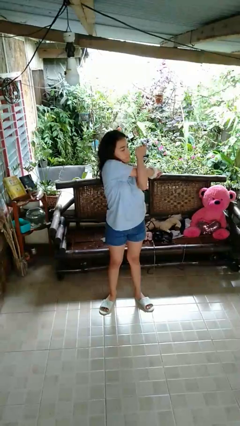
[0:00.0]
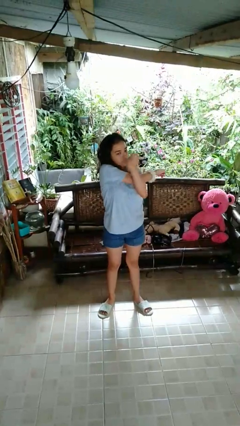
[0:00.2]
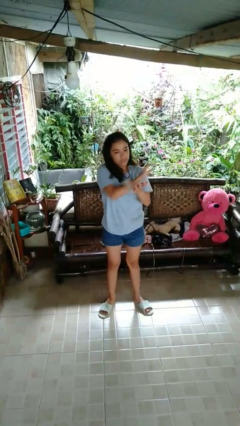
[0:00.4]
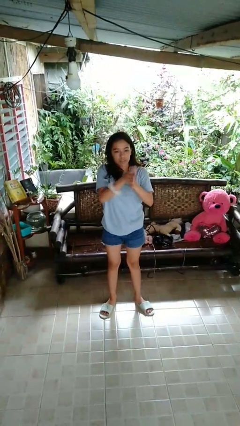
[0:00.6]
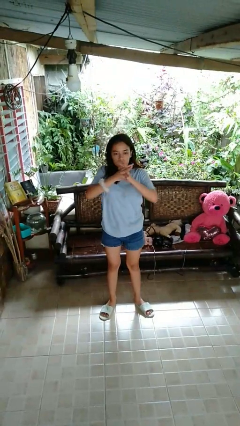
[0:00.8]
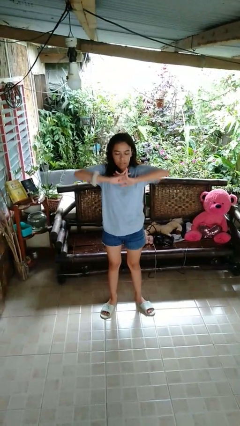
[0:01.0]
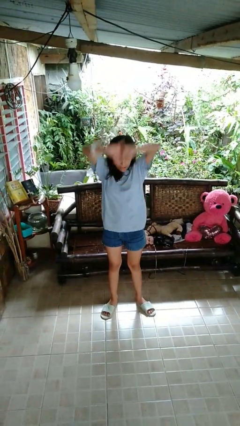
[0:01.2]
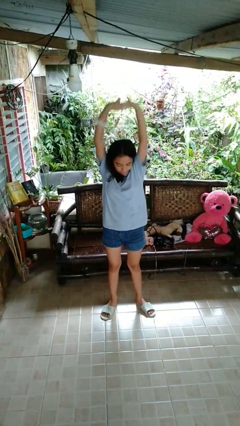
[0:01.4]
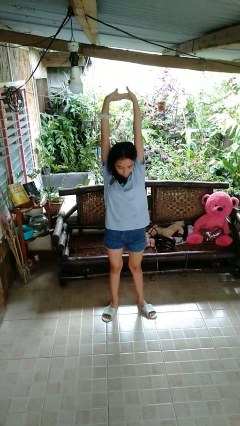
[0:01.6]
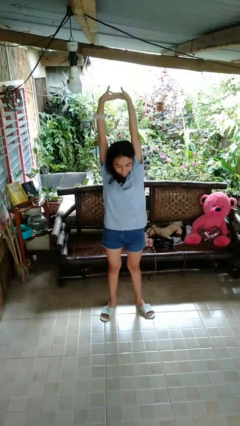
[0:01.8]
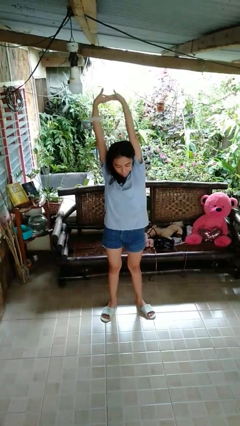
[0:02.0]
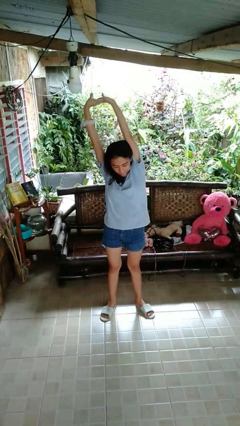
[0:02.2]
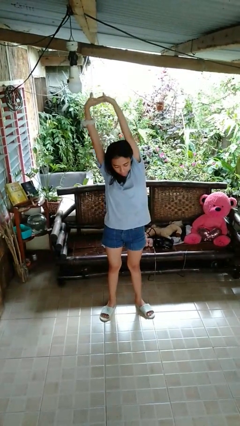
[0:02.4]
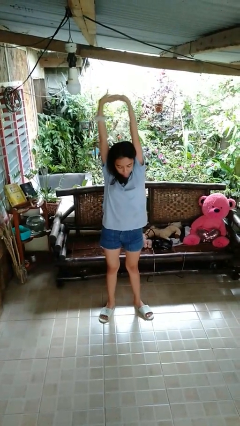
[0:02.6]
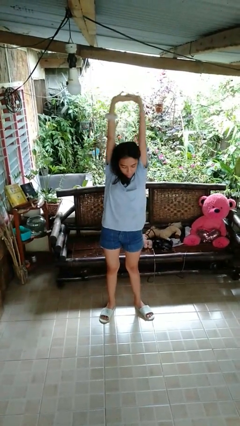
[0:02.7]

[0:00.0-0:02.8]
person stretches arms over head

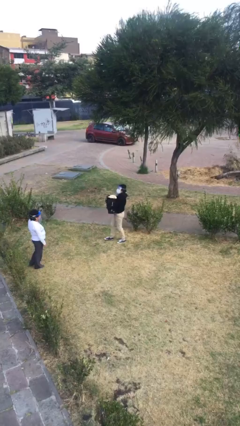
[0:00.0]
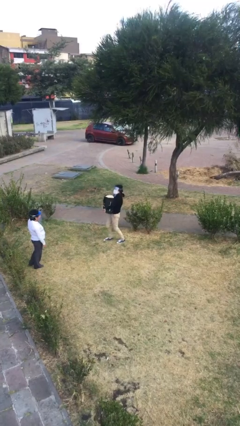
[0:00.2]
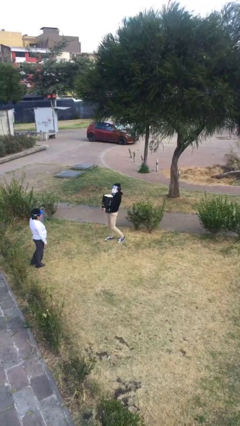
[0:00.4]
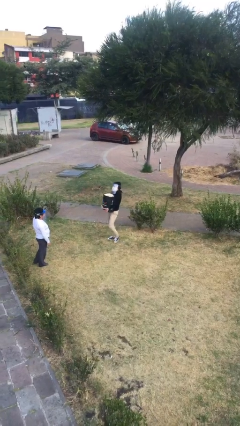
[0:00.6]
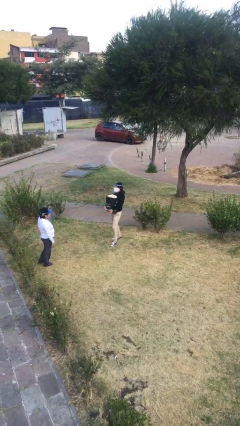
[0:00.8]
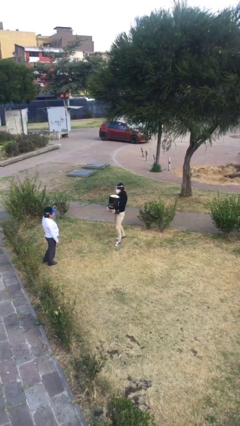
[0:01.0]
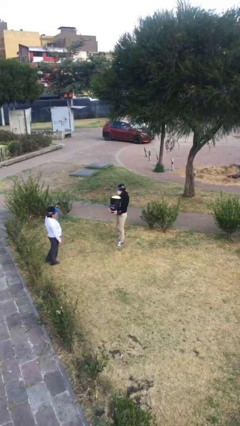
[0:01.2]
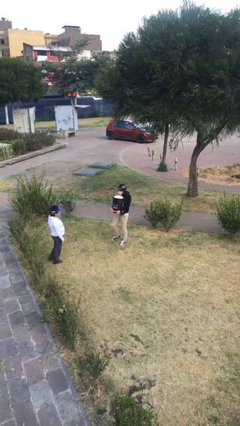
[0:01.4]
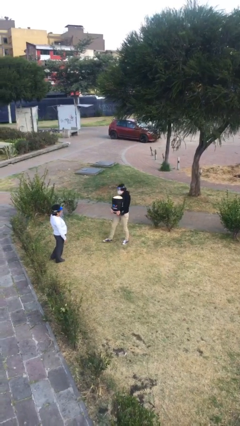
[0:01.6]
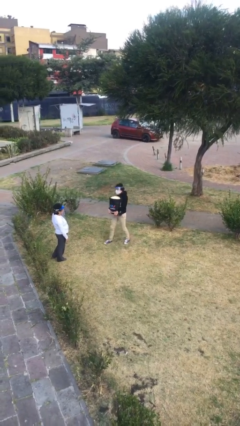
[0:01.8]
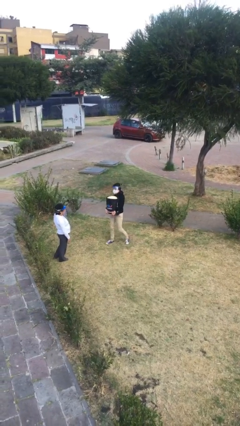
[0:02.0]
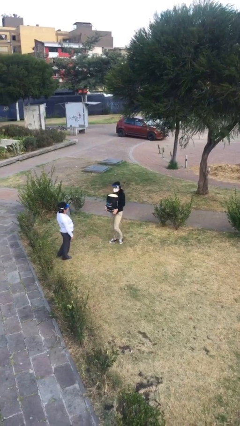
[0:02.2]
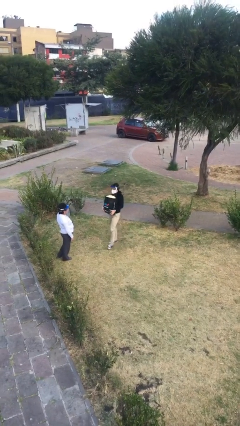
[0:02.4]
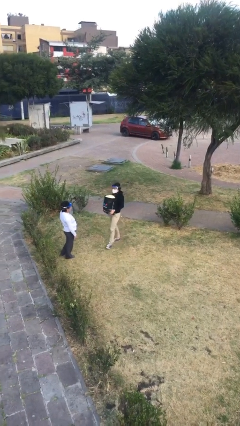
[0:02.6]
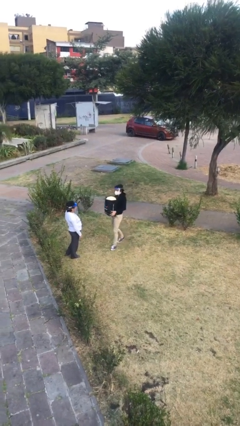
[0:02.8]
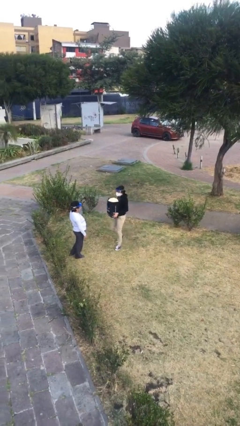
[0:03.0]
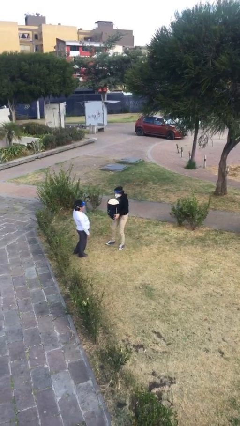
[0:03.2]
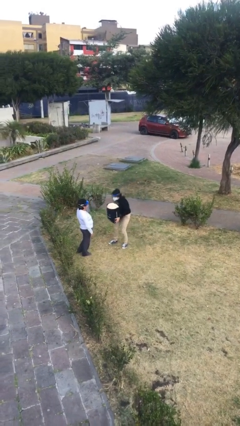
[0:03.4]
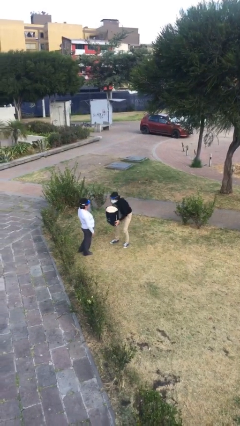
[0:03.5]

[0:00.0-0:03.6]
person carries heavy object

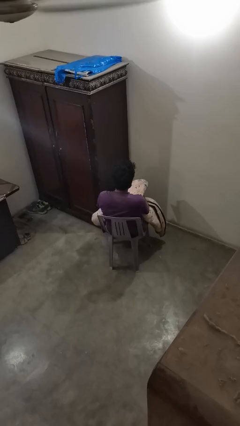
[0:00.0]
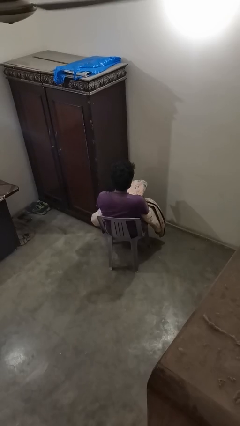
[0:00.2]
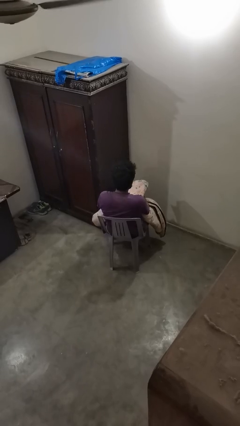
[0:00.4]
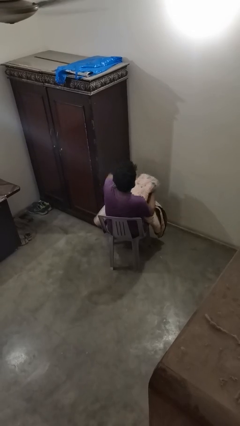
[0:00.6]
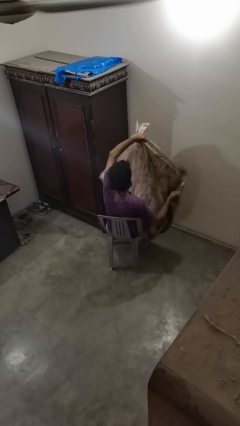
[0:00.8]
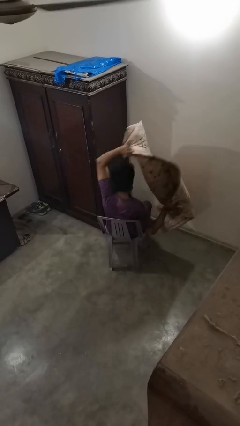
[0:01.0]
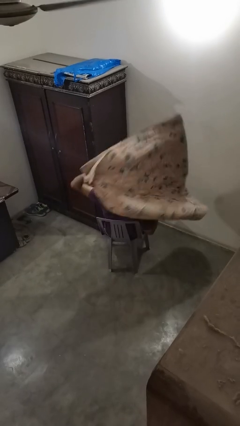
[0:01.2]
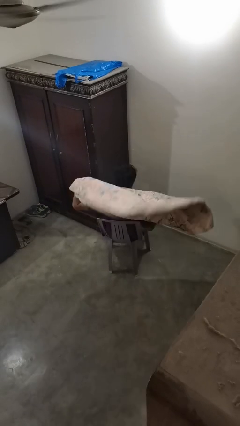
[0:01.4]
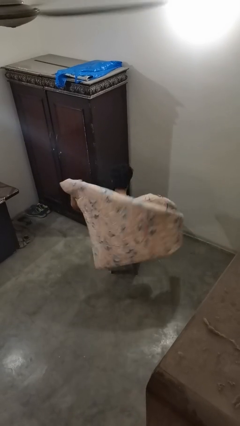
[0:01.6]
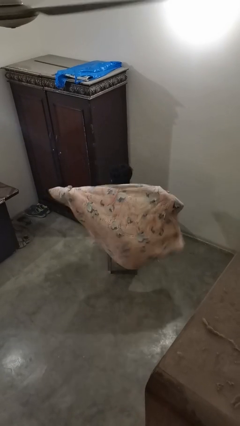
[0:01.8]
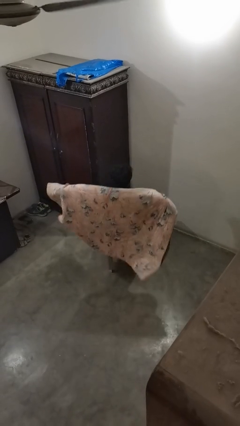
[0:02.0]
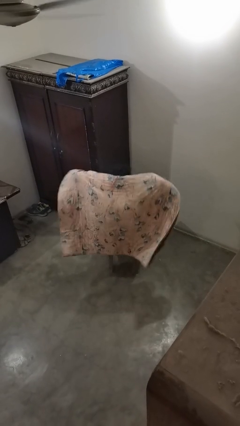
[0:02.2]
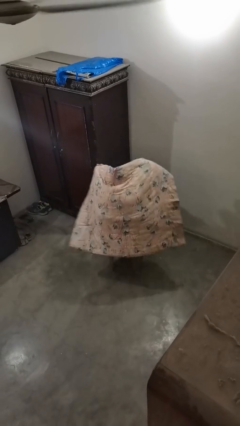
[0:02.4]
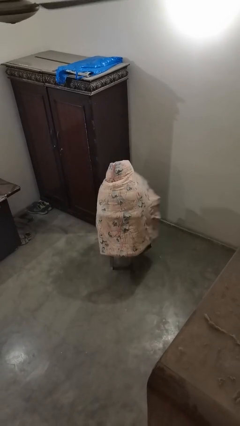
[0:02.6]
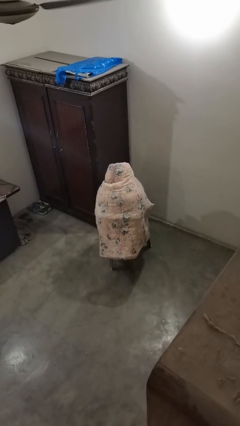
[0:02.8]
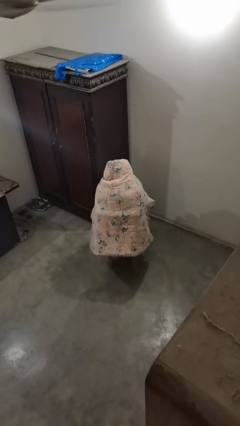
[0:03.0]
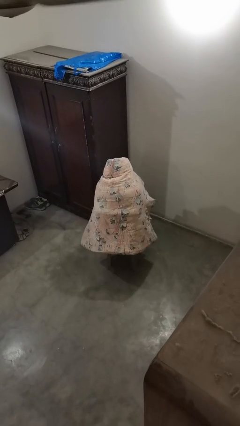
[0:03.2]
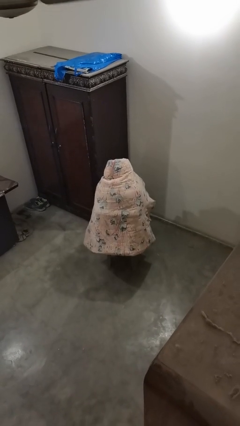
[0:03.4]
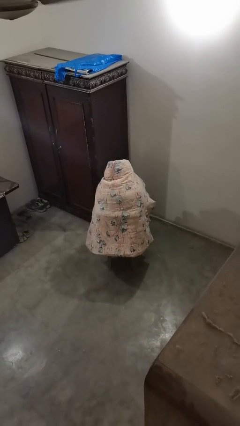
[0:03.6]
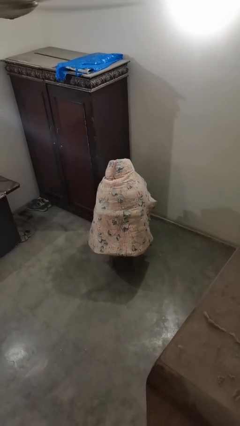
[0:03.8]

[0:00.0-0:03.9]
person covers with blanket

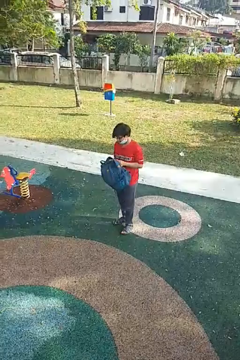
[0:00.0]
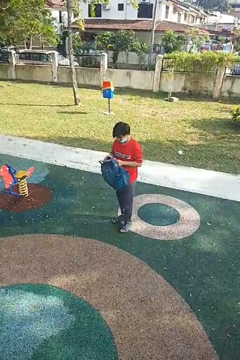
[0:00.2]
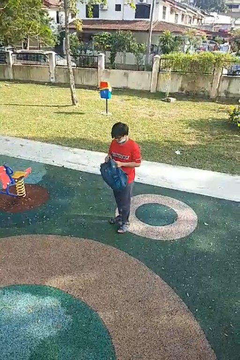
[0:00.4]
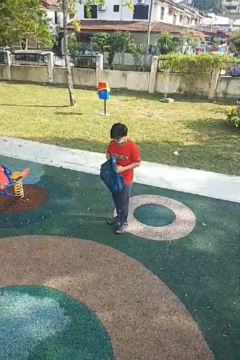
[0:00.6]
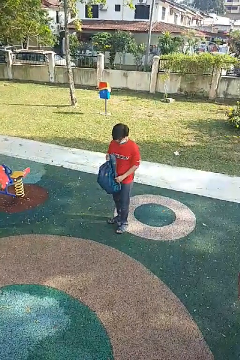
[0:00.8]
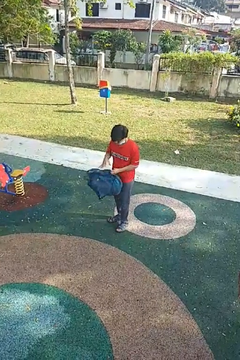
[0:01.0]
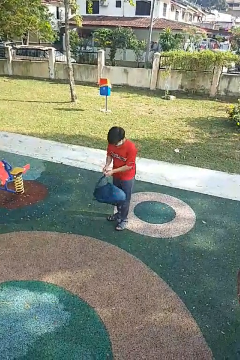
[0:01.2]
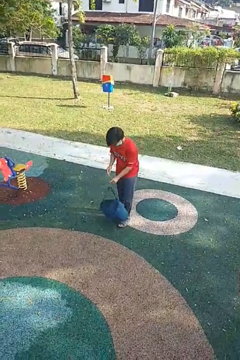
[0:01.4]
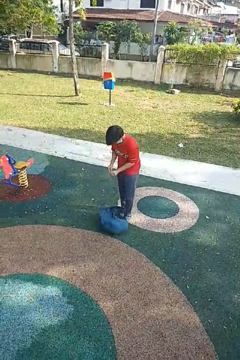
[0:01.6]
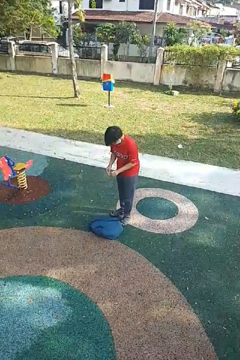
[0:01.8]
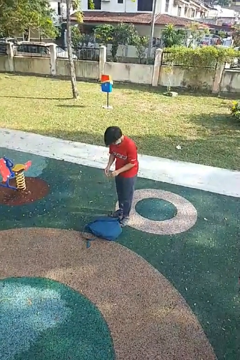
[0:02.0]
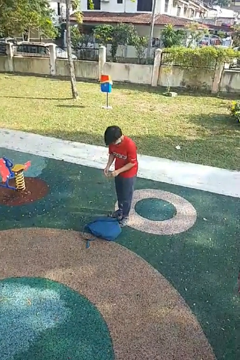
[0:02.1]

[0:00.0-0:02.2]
person drops object

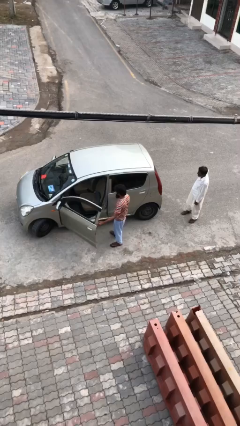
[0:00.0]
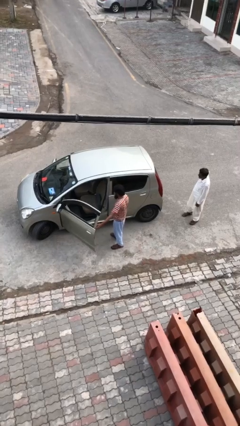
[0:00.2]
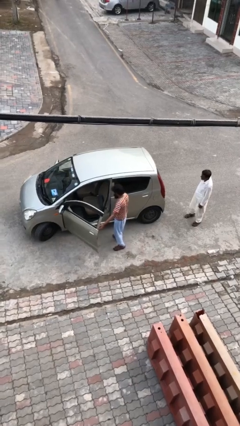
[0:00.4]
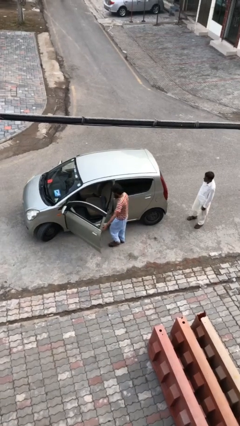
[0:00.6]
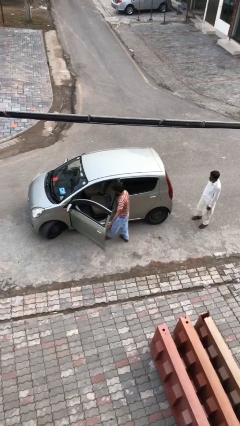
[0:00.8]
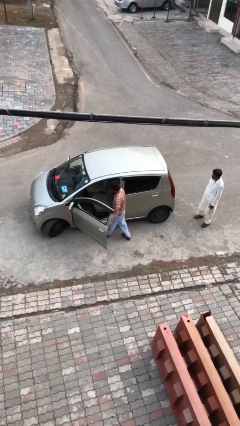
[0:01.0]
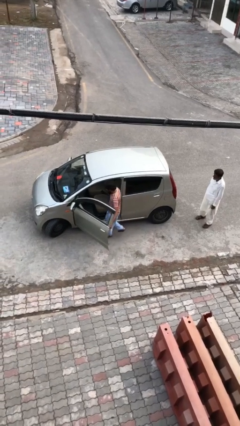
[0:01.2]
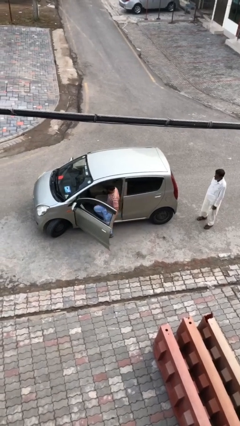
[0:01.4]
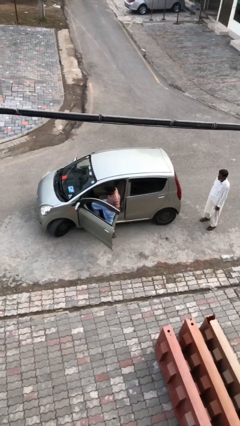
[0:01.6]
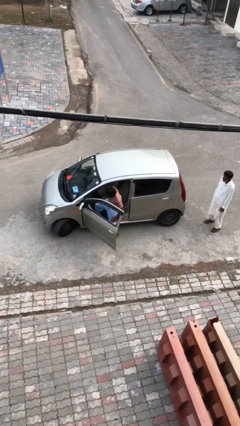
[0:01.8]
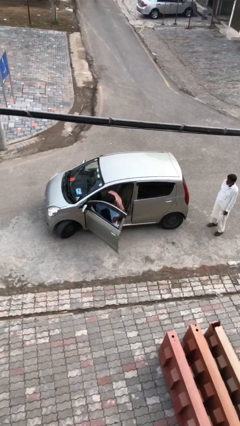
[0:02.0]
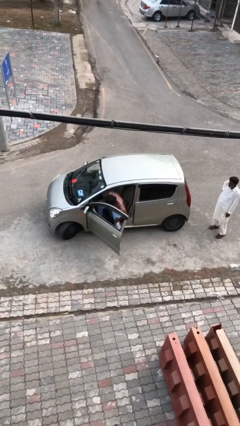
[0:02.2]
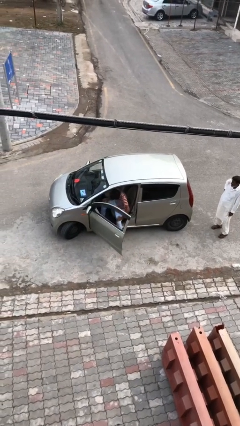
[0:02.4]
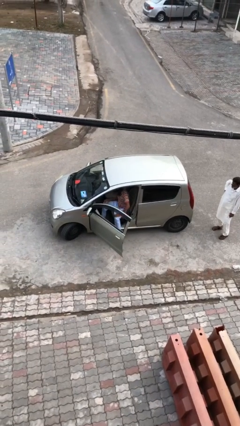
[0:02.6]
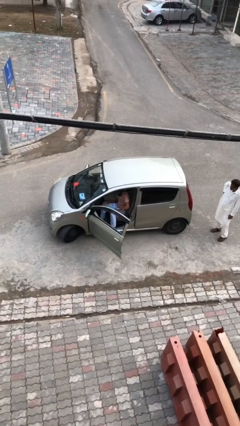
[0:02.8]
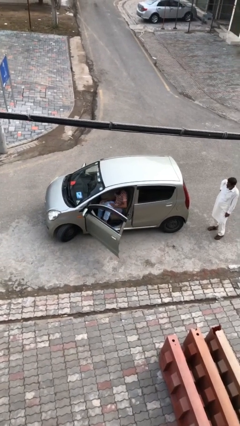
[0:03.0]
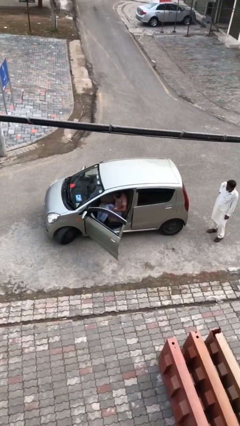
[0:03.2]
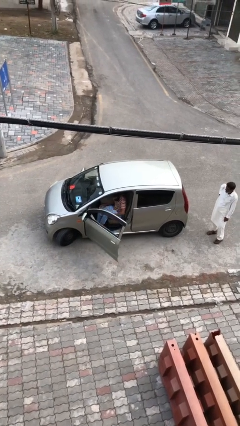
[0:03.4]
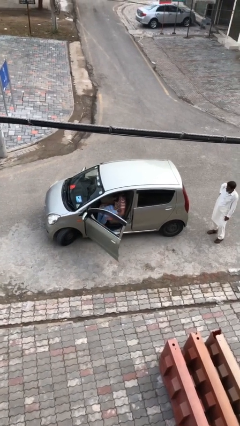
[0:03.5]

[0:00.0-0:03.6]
person enters car

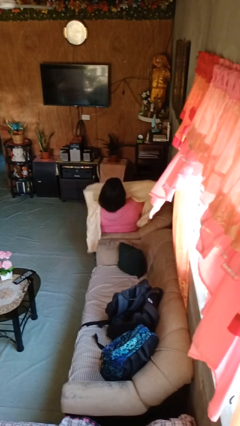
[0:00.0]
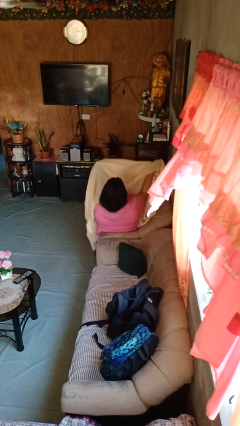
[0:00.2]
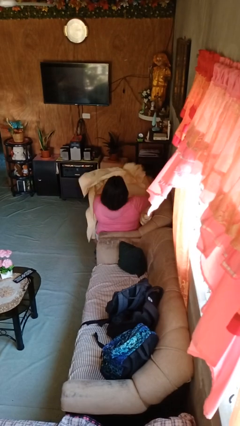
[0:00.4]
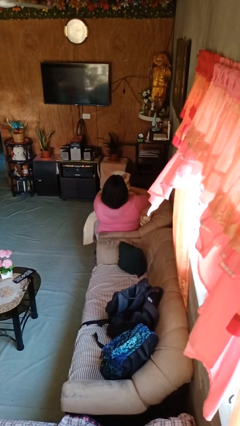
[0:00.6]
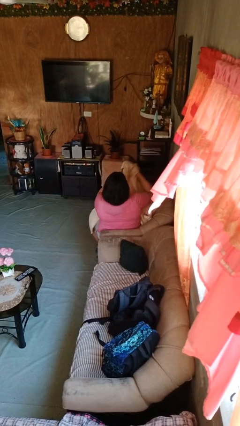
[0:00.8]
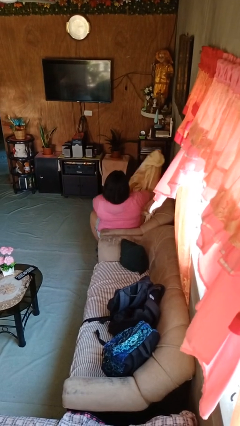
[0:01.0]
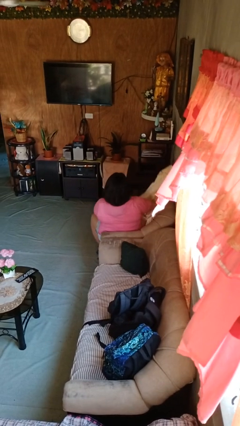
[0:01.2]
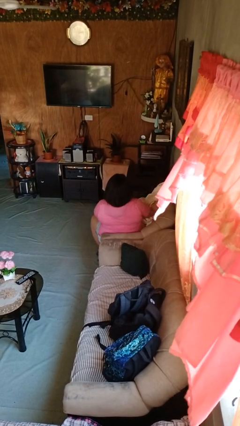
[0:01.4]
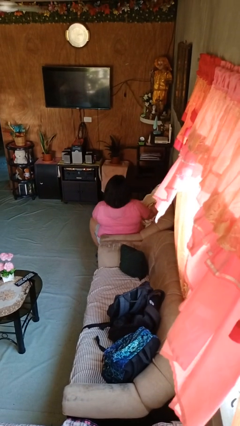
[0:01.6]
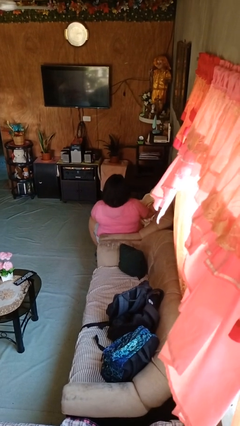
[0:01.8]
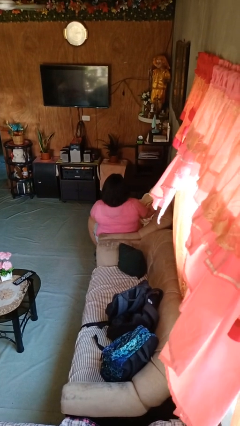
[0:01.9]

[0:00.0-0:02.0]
person uncovers with blanket
